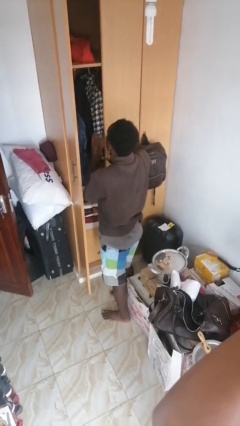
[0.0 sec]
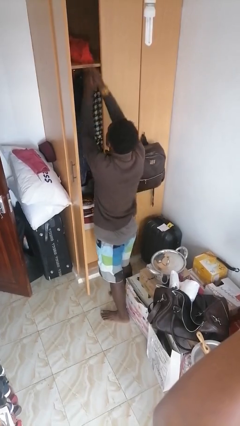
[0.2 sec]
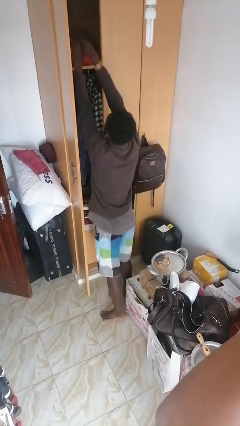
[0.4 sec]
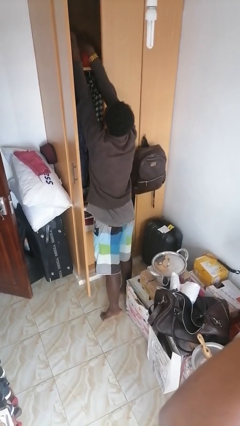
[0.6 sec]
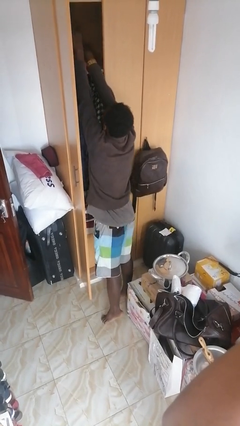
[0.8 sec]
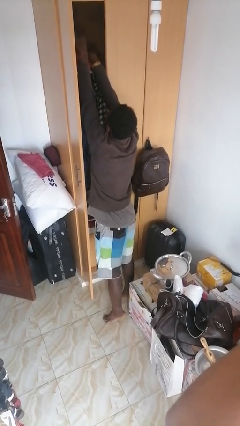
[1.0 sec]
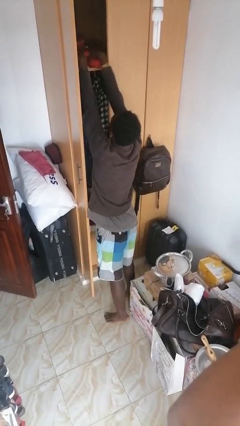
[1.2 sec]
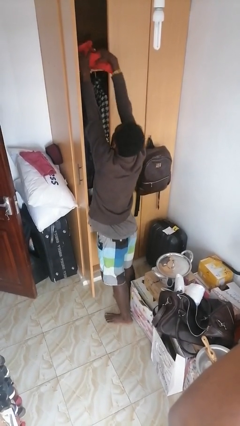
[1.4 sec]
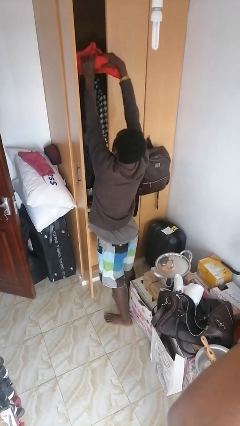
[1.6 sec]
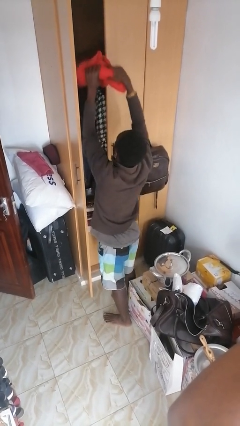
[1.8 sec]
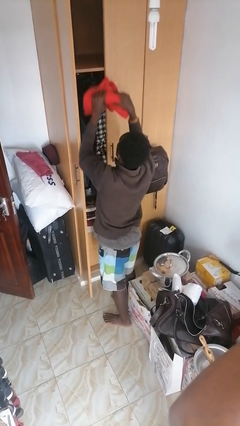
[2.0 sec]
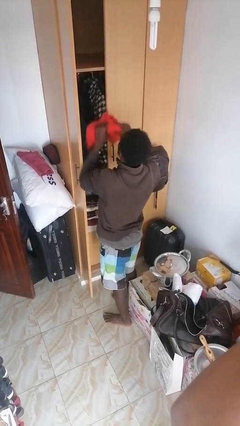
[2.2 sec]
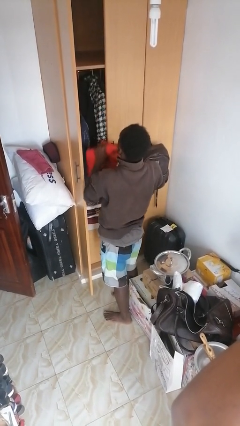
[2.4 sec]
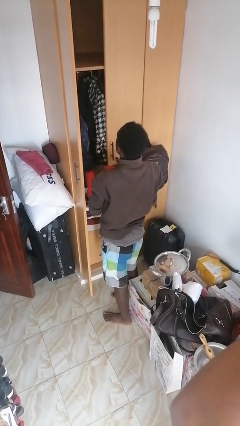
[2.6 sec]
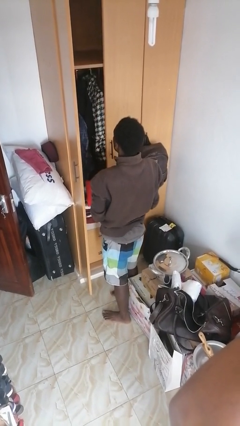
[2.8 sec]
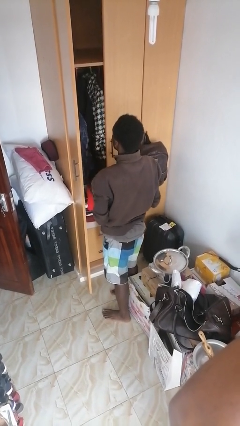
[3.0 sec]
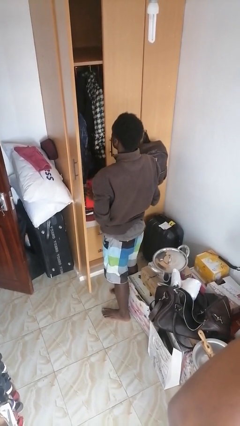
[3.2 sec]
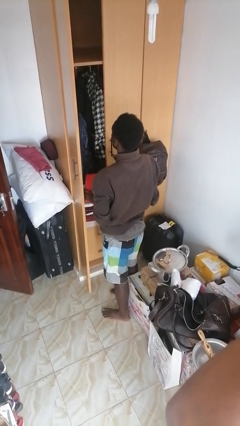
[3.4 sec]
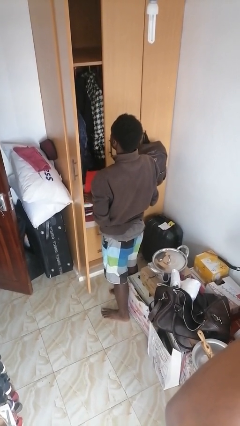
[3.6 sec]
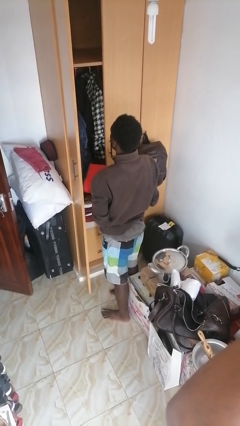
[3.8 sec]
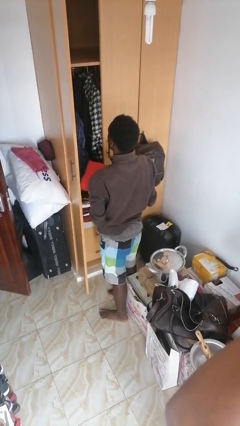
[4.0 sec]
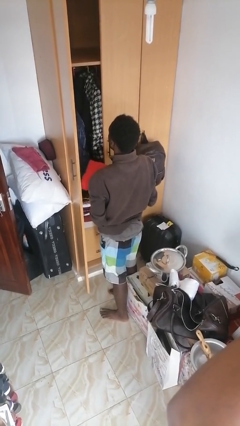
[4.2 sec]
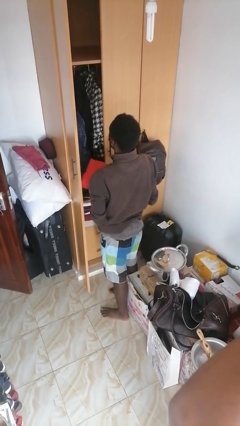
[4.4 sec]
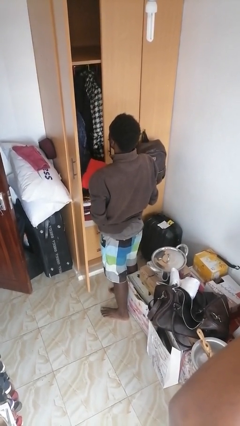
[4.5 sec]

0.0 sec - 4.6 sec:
person picks up object from shelf

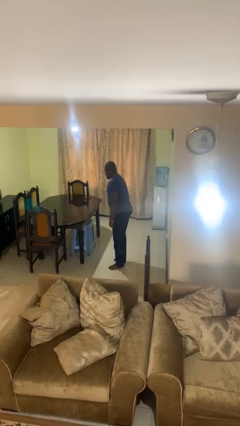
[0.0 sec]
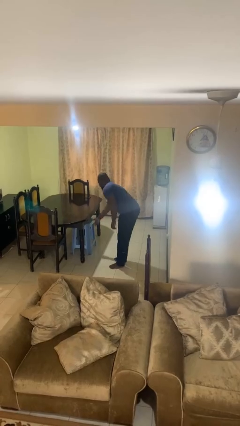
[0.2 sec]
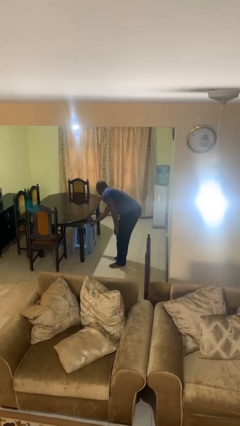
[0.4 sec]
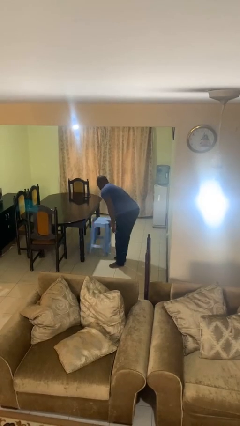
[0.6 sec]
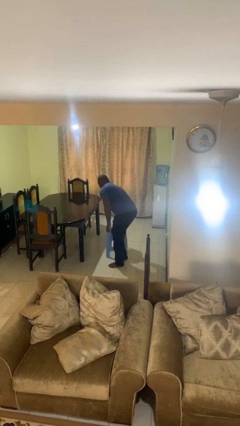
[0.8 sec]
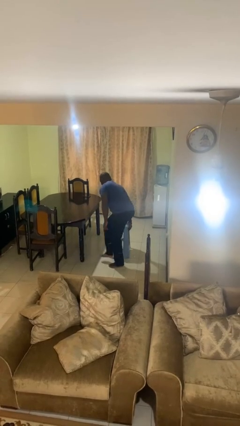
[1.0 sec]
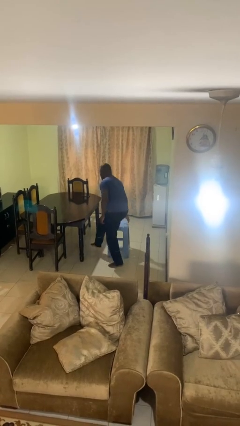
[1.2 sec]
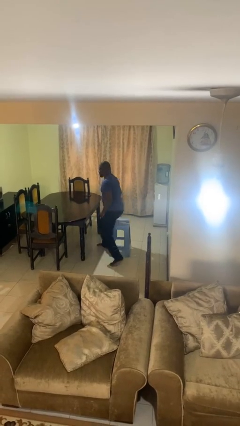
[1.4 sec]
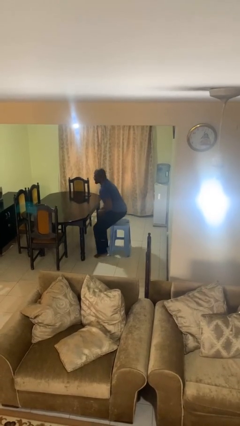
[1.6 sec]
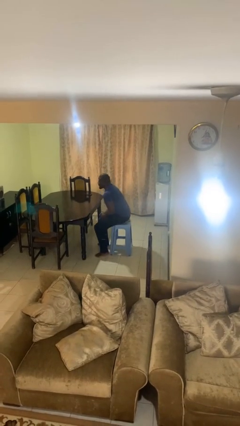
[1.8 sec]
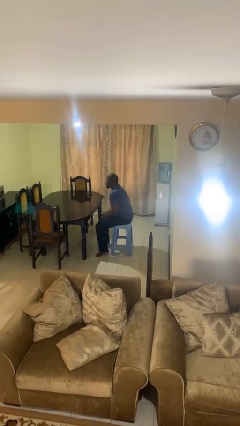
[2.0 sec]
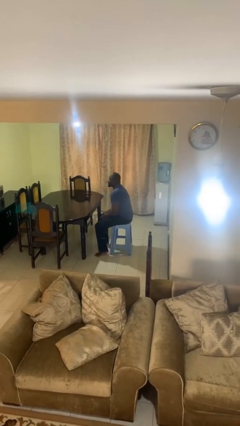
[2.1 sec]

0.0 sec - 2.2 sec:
person sits down

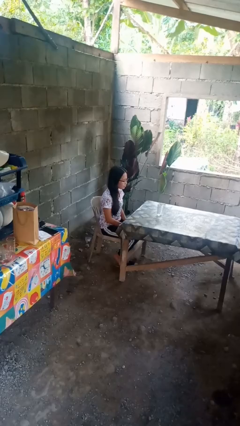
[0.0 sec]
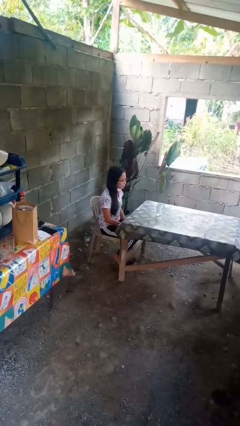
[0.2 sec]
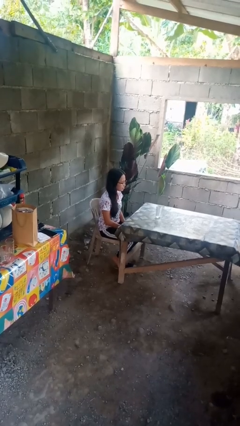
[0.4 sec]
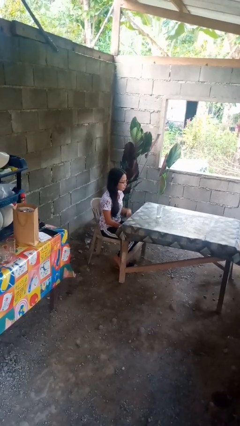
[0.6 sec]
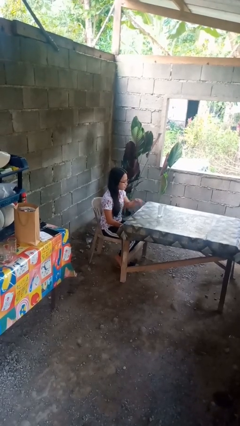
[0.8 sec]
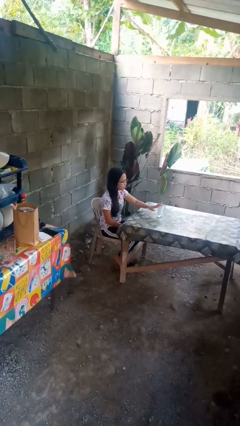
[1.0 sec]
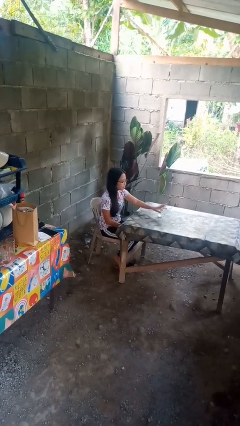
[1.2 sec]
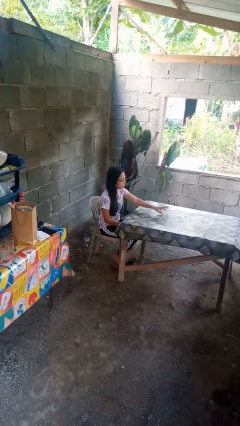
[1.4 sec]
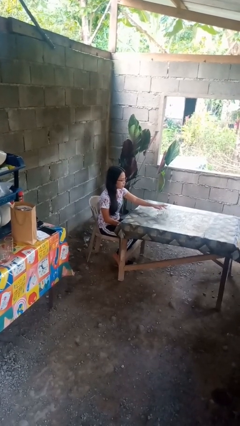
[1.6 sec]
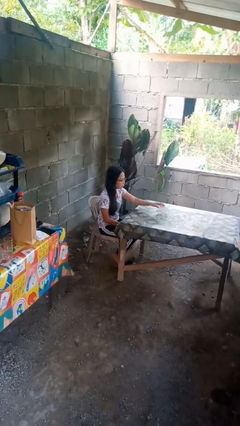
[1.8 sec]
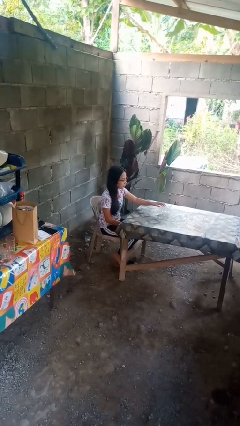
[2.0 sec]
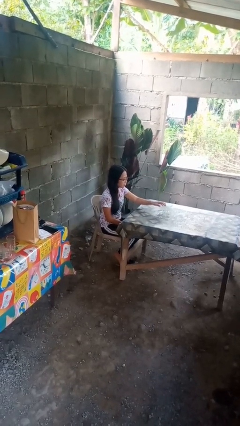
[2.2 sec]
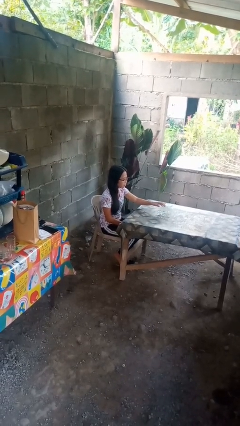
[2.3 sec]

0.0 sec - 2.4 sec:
person knocks over glass

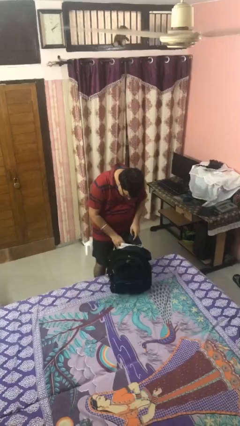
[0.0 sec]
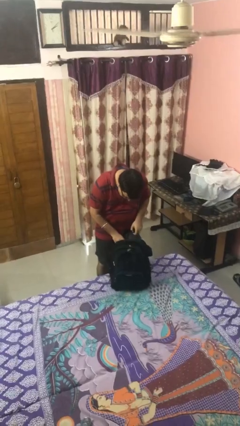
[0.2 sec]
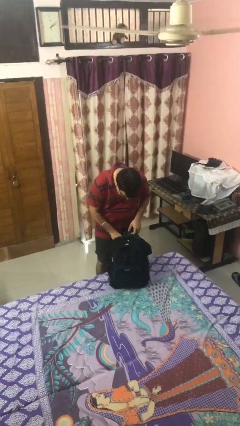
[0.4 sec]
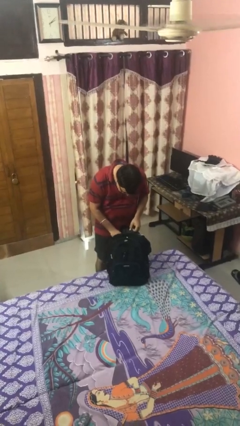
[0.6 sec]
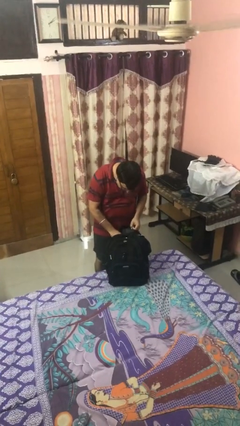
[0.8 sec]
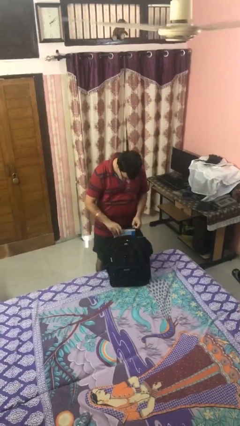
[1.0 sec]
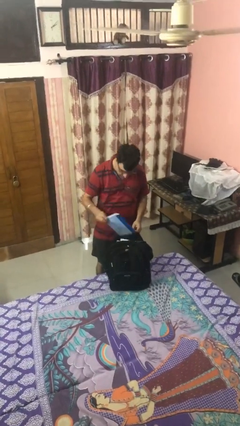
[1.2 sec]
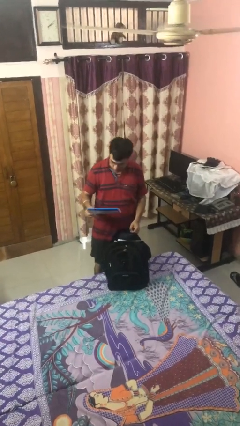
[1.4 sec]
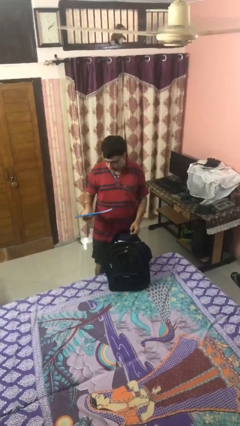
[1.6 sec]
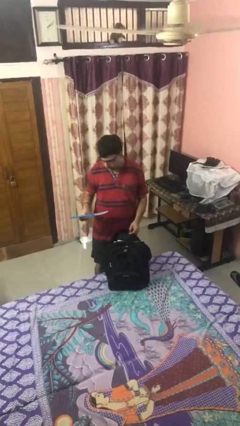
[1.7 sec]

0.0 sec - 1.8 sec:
person takes object from backpack

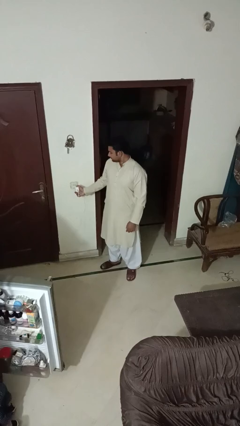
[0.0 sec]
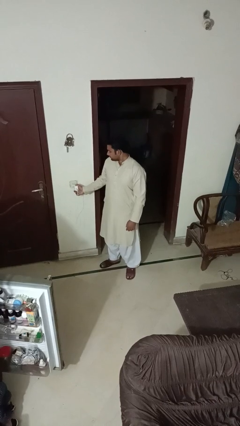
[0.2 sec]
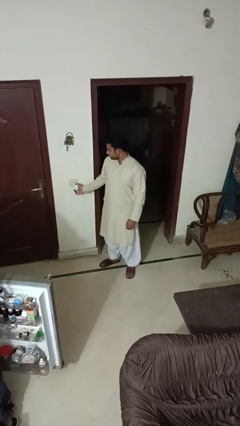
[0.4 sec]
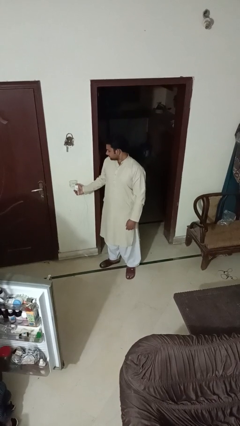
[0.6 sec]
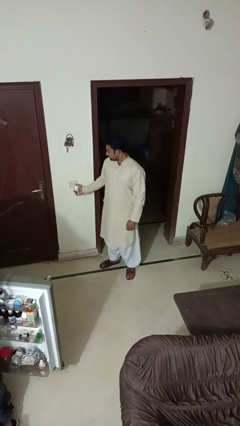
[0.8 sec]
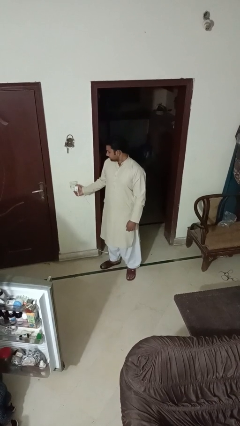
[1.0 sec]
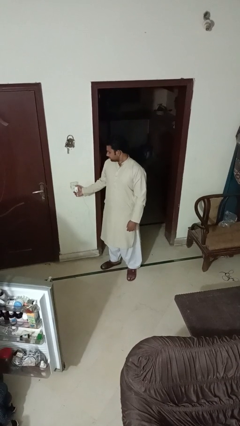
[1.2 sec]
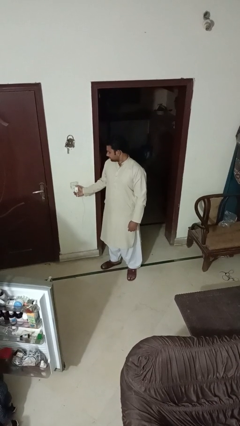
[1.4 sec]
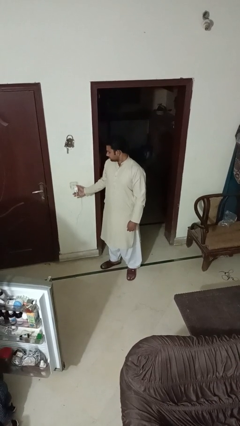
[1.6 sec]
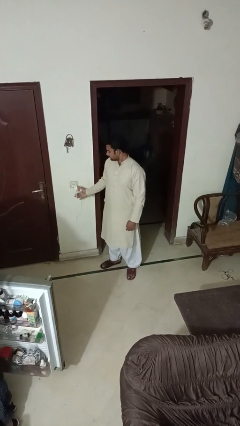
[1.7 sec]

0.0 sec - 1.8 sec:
person plugs into electrical socket

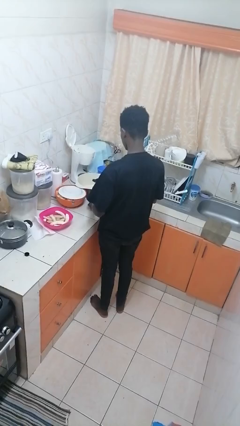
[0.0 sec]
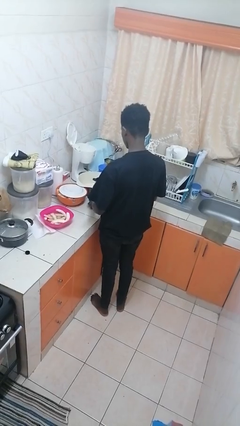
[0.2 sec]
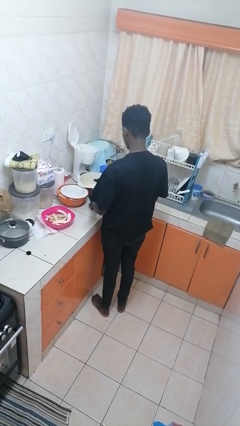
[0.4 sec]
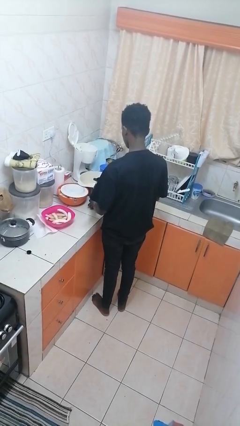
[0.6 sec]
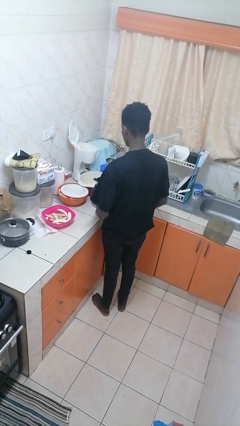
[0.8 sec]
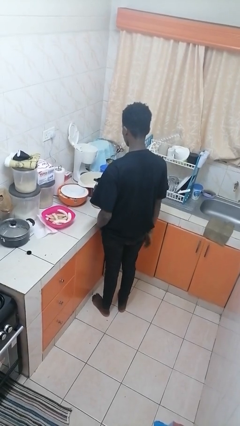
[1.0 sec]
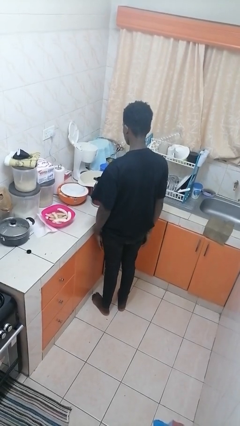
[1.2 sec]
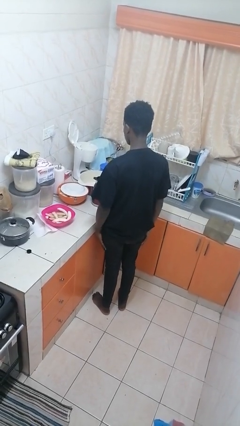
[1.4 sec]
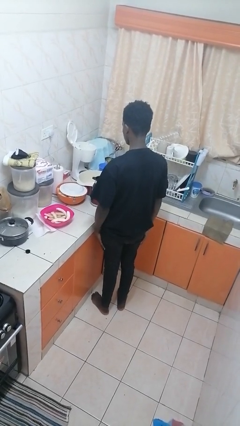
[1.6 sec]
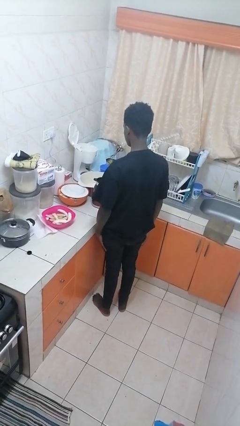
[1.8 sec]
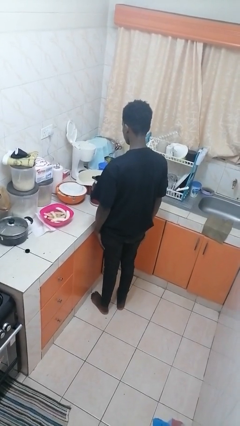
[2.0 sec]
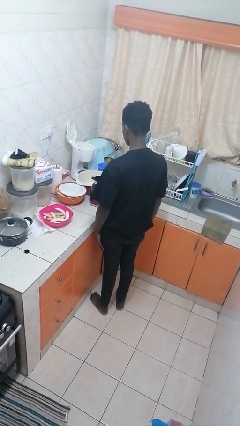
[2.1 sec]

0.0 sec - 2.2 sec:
person puts down object on countertop

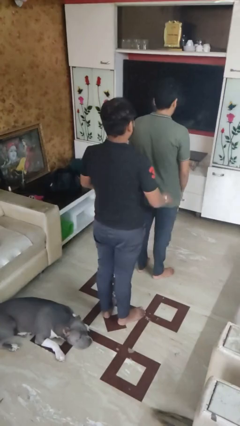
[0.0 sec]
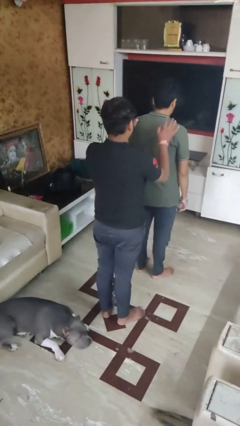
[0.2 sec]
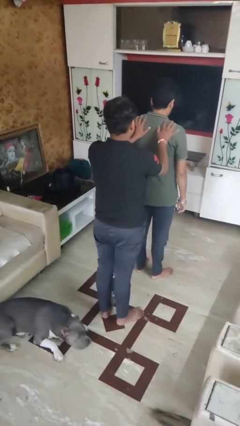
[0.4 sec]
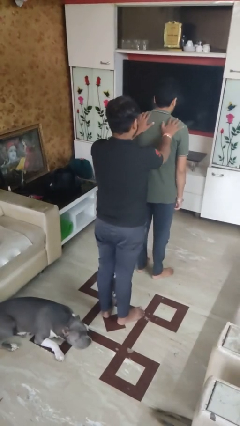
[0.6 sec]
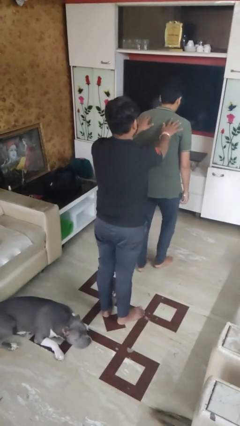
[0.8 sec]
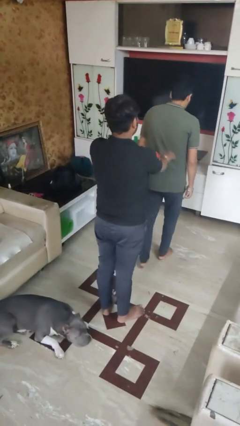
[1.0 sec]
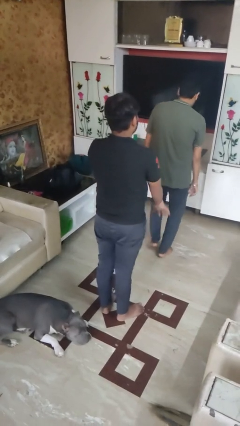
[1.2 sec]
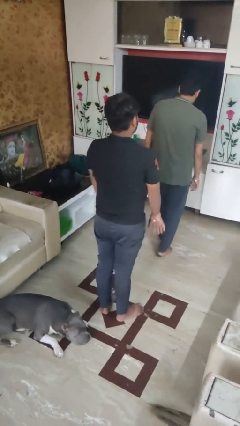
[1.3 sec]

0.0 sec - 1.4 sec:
person shoves person

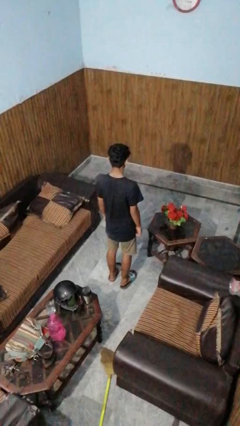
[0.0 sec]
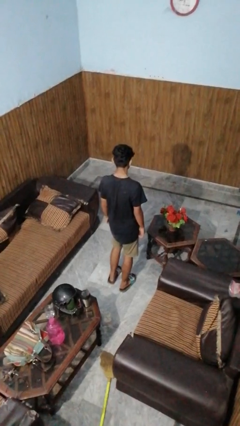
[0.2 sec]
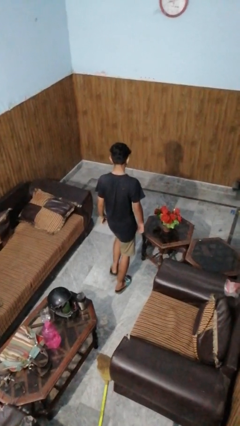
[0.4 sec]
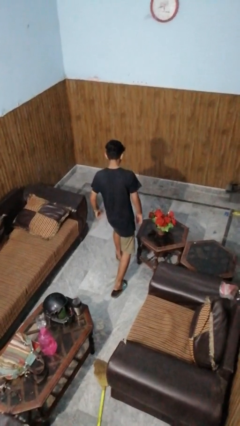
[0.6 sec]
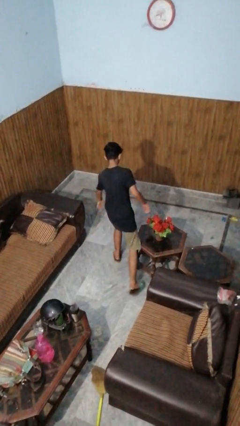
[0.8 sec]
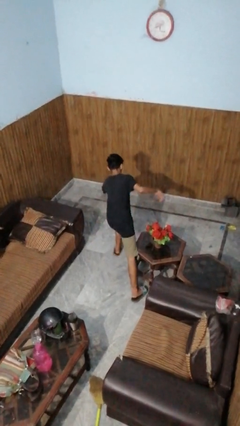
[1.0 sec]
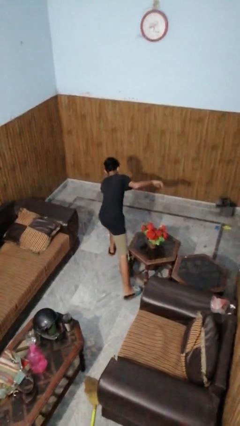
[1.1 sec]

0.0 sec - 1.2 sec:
person trips on object on floor
